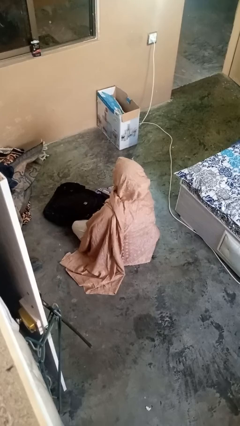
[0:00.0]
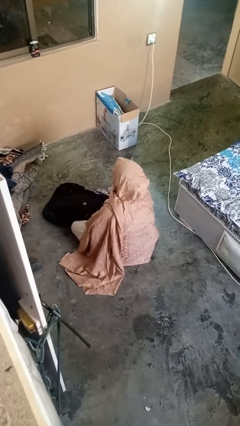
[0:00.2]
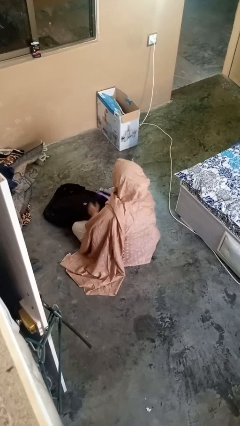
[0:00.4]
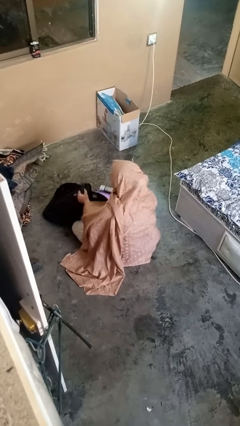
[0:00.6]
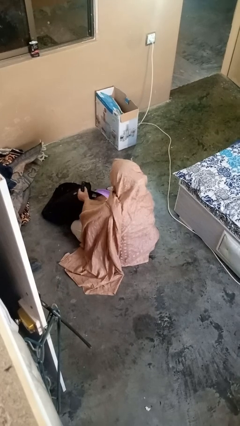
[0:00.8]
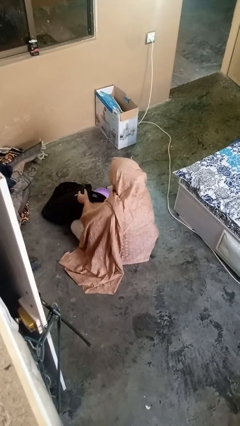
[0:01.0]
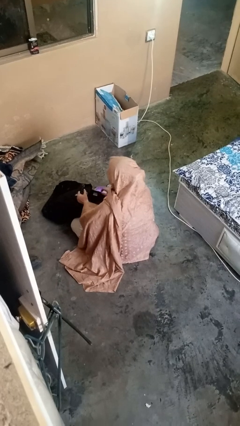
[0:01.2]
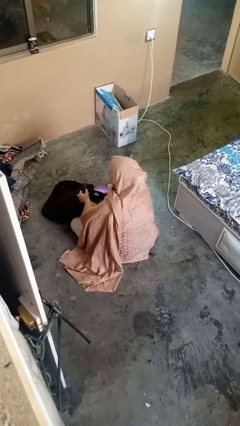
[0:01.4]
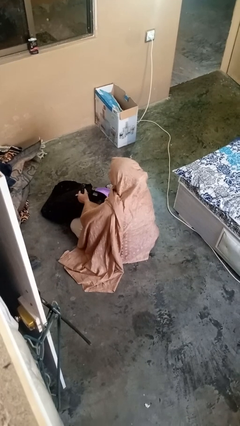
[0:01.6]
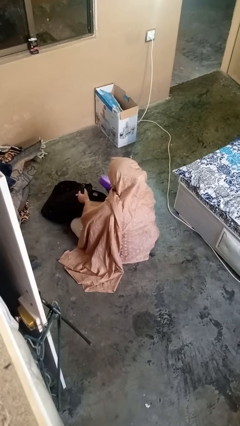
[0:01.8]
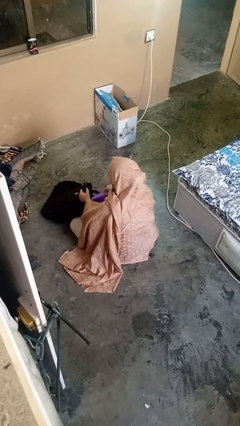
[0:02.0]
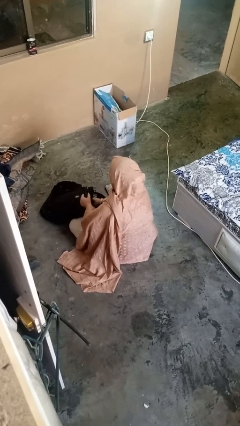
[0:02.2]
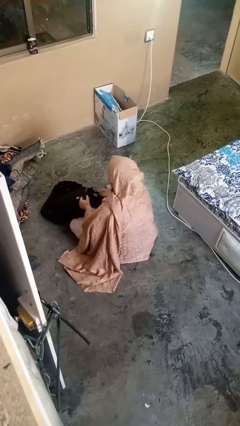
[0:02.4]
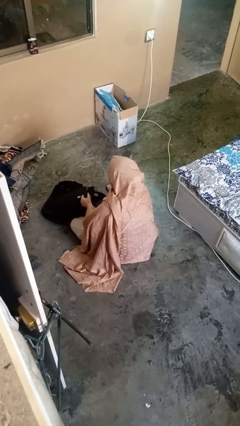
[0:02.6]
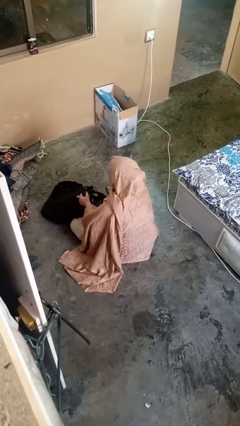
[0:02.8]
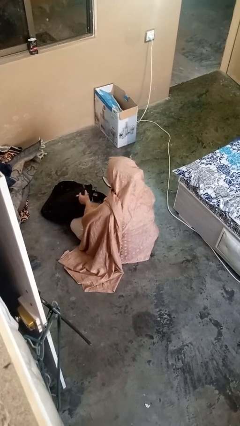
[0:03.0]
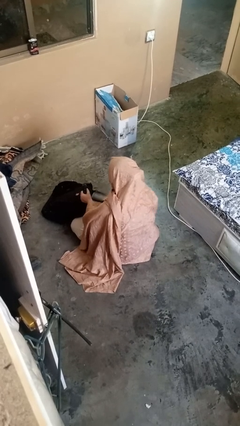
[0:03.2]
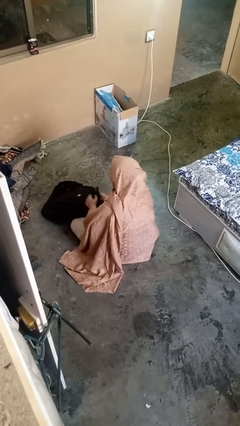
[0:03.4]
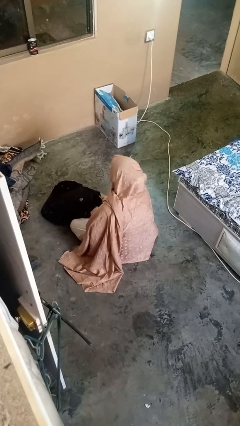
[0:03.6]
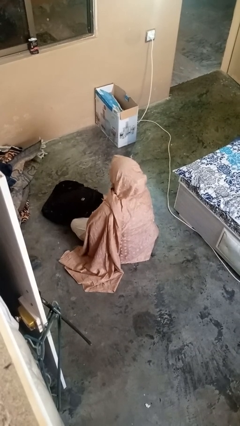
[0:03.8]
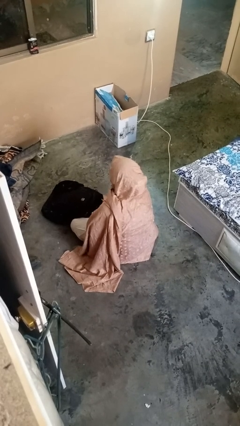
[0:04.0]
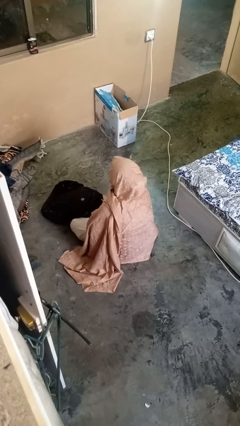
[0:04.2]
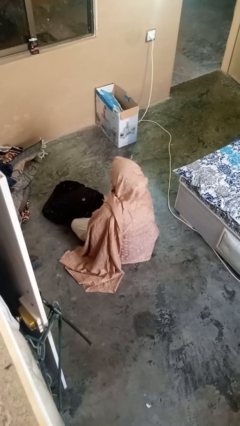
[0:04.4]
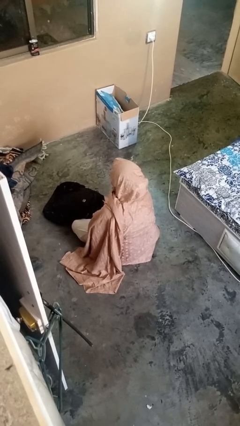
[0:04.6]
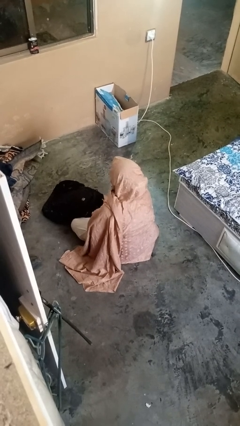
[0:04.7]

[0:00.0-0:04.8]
person puts object into backpack

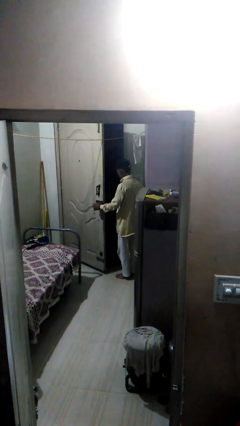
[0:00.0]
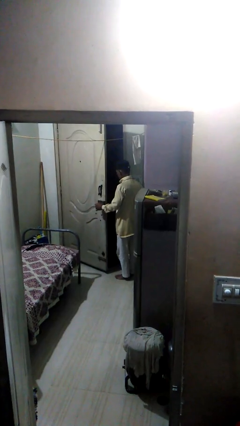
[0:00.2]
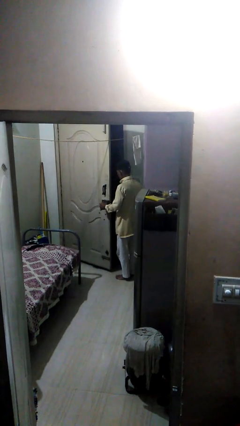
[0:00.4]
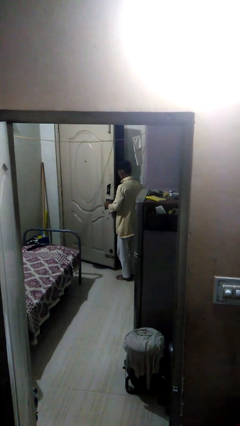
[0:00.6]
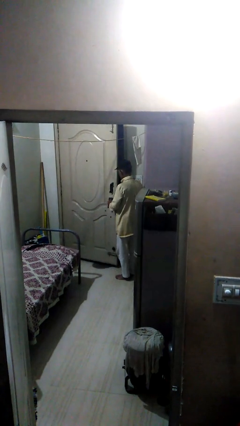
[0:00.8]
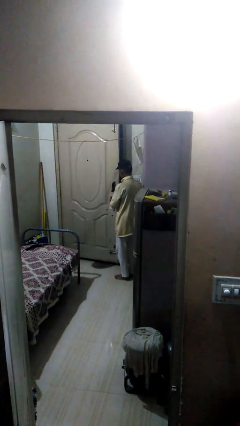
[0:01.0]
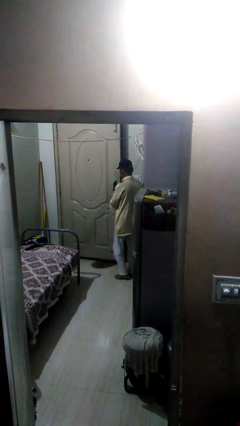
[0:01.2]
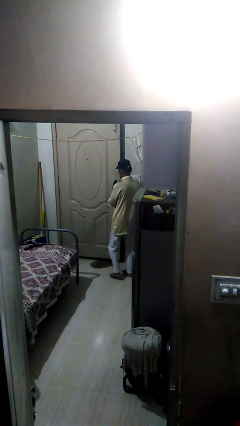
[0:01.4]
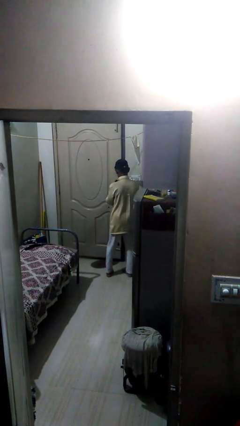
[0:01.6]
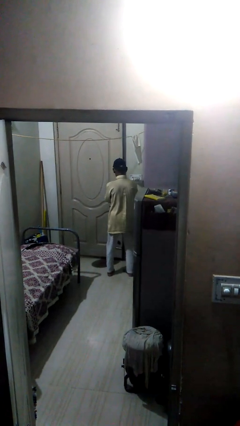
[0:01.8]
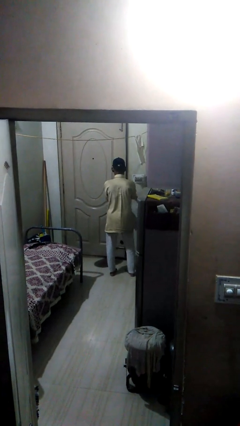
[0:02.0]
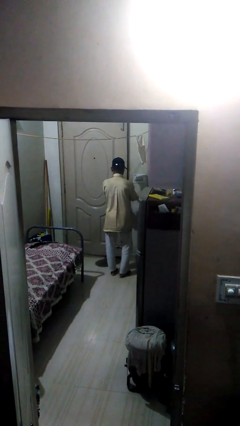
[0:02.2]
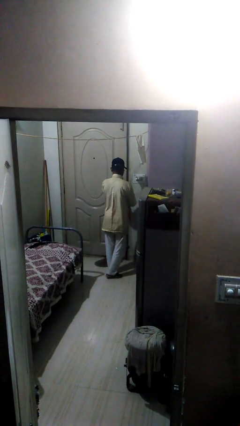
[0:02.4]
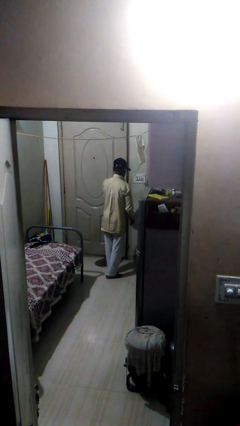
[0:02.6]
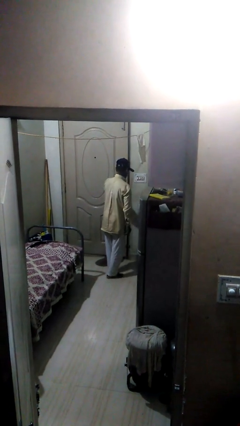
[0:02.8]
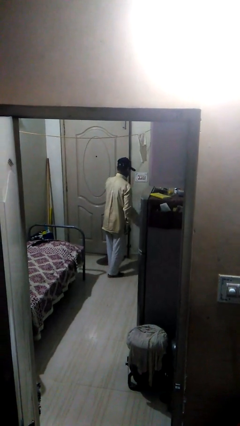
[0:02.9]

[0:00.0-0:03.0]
person closes facility door

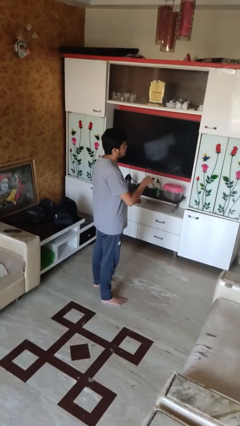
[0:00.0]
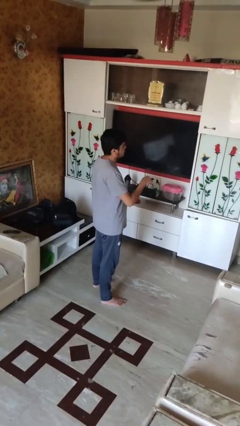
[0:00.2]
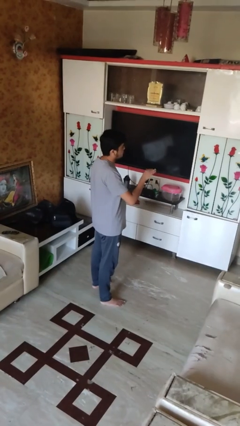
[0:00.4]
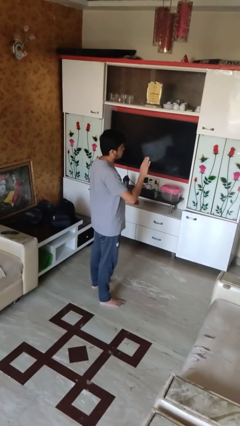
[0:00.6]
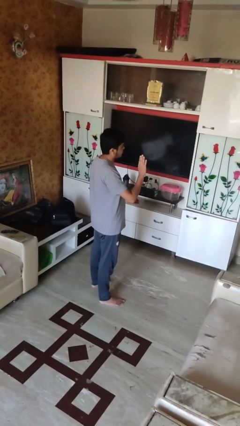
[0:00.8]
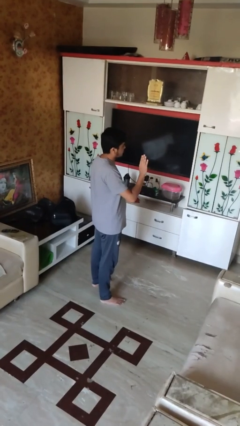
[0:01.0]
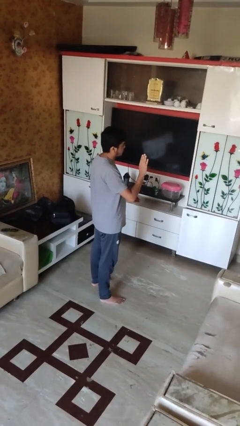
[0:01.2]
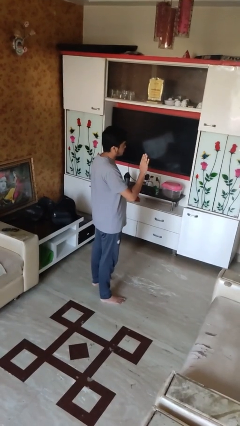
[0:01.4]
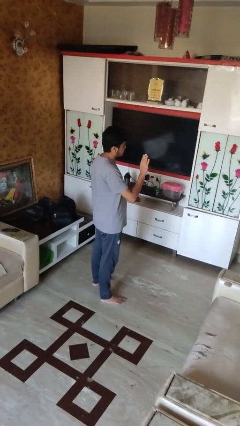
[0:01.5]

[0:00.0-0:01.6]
person gestures swipe up

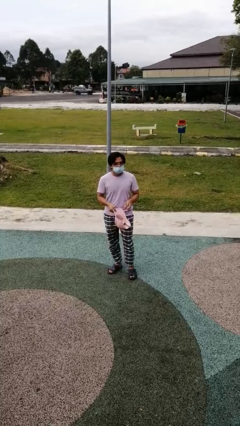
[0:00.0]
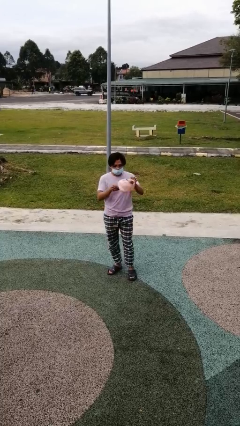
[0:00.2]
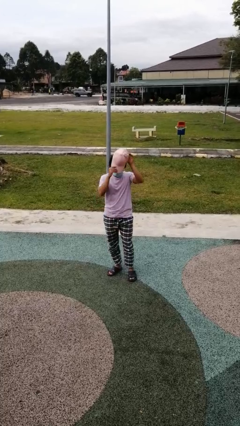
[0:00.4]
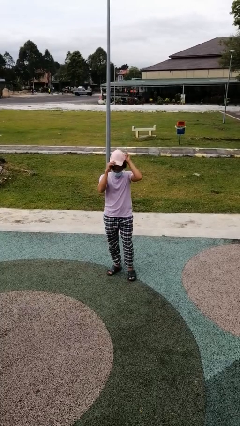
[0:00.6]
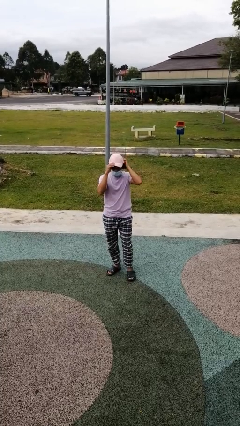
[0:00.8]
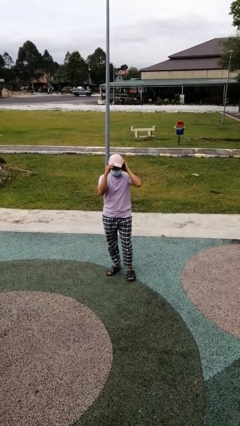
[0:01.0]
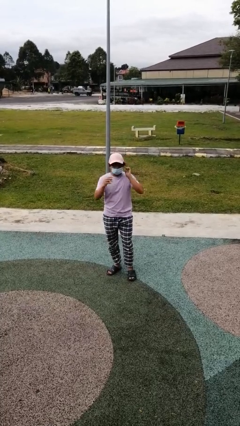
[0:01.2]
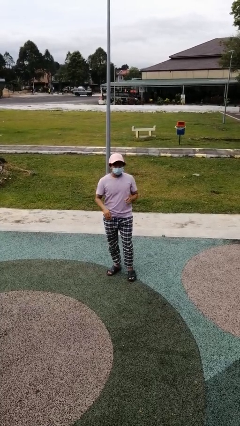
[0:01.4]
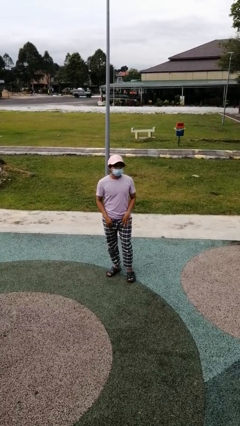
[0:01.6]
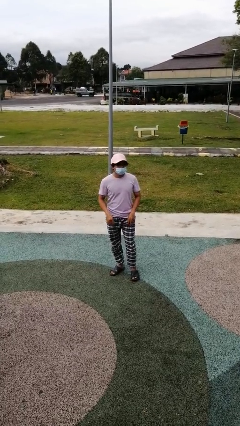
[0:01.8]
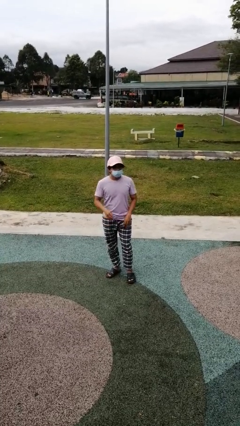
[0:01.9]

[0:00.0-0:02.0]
person puts on hat

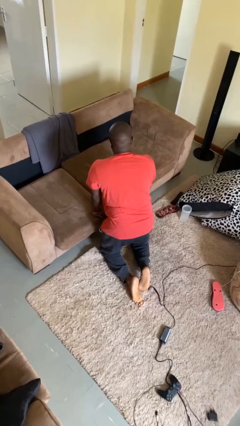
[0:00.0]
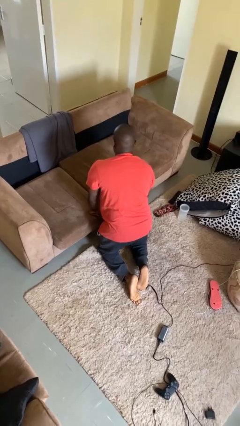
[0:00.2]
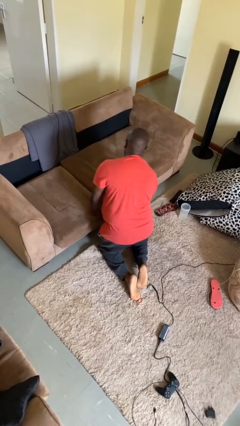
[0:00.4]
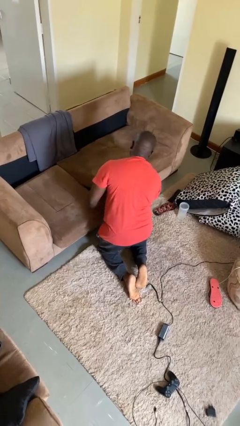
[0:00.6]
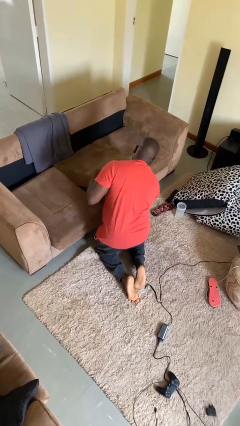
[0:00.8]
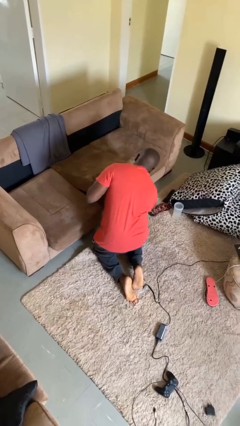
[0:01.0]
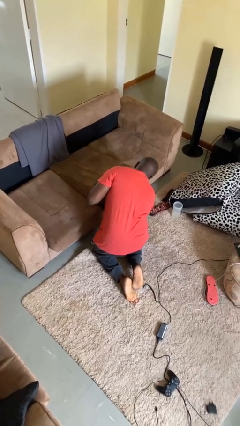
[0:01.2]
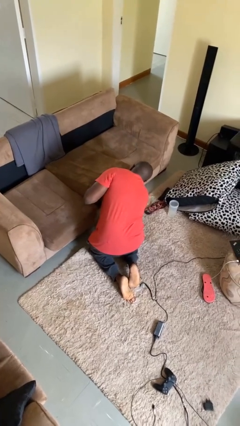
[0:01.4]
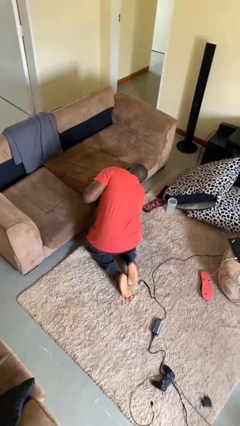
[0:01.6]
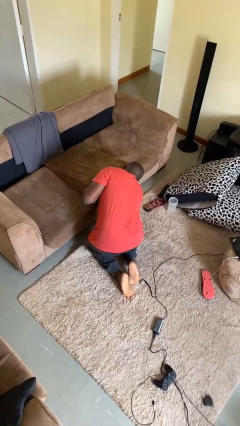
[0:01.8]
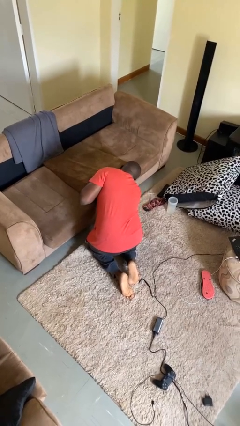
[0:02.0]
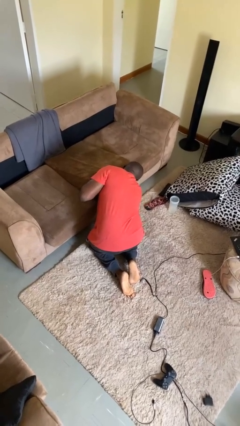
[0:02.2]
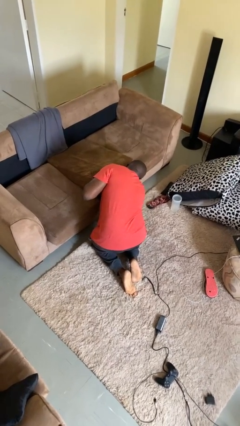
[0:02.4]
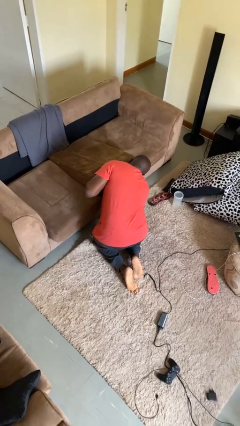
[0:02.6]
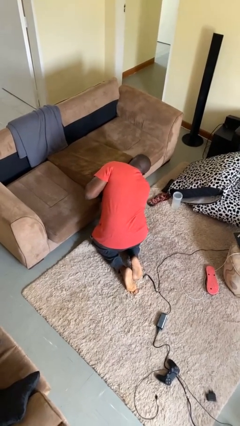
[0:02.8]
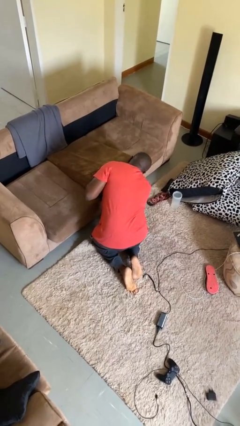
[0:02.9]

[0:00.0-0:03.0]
person searches under couch

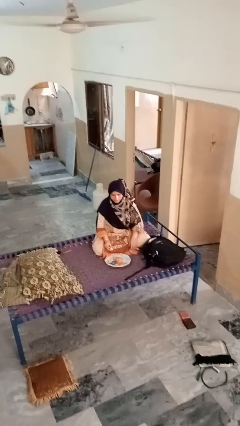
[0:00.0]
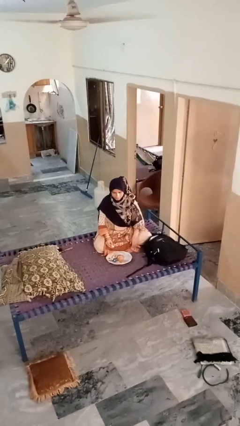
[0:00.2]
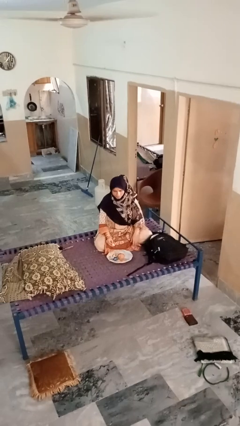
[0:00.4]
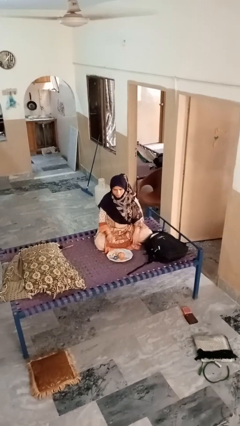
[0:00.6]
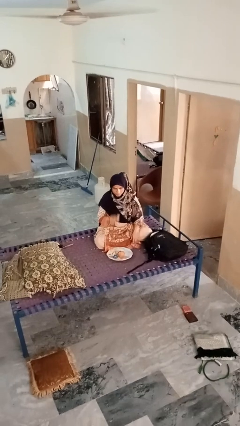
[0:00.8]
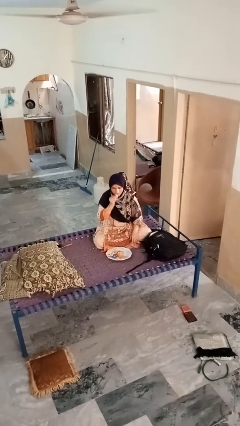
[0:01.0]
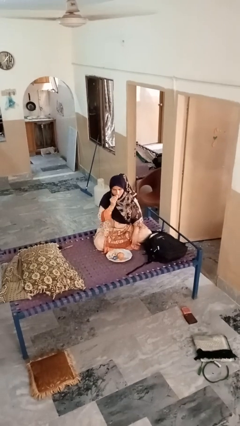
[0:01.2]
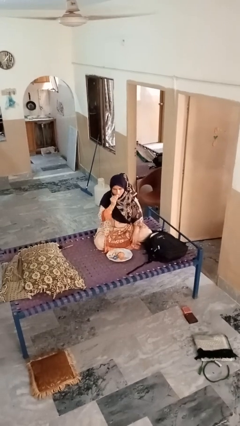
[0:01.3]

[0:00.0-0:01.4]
person eats apple

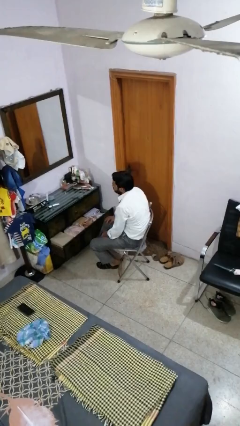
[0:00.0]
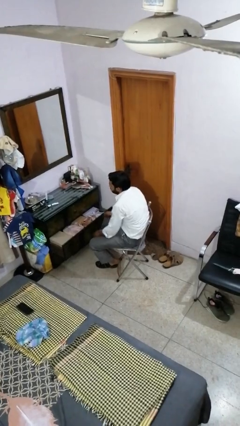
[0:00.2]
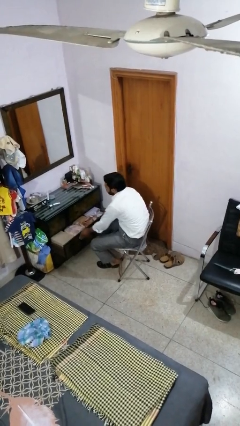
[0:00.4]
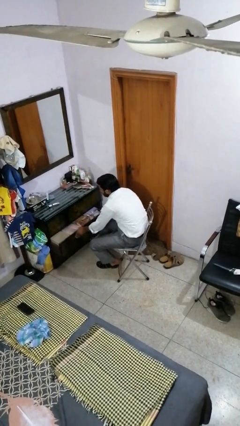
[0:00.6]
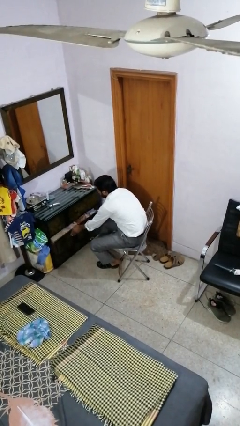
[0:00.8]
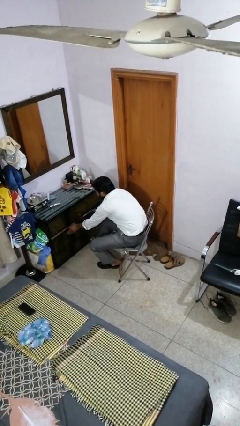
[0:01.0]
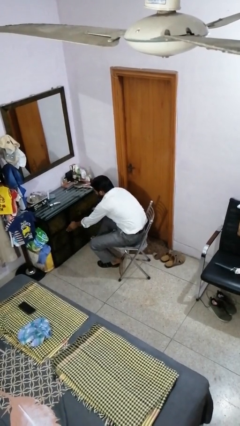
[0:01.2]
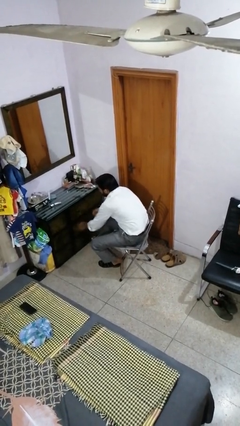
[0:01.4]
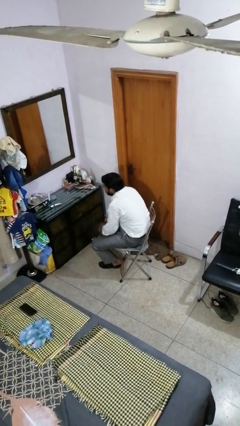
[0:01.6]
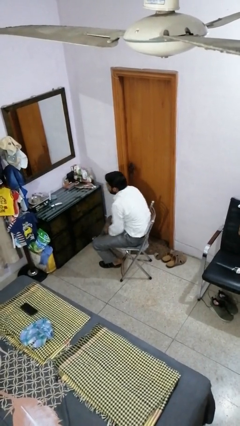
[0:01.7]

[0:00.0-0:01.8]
person closes dresser drawer
